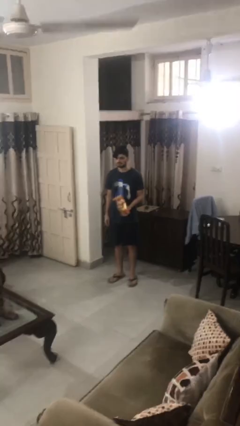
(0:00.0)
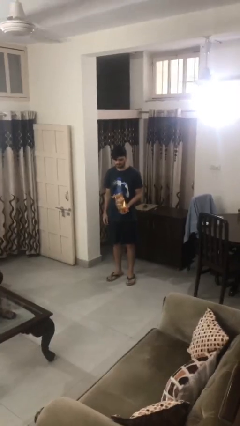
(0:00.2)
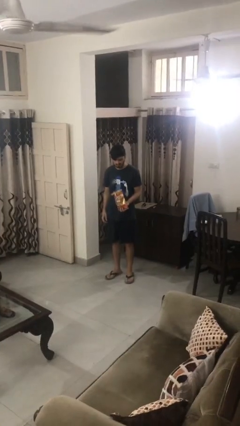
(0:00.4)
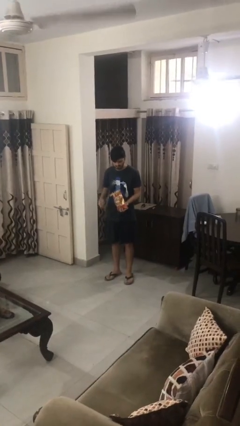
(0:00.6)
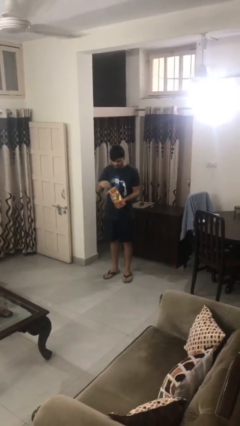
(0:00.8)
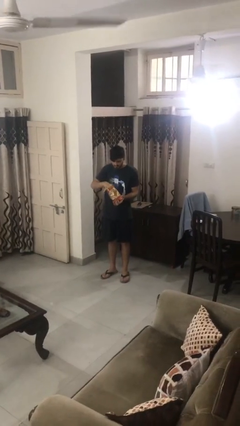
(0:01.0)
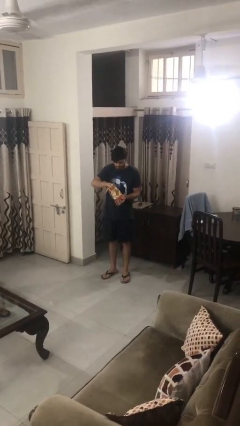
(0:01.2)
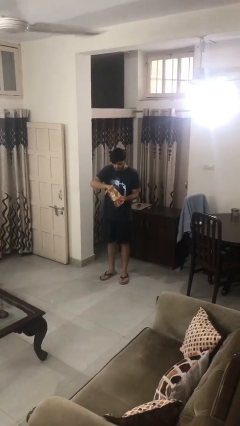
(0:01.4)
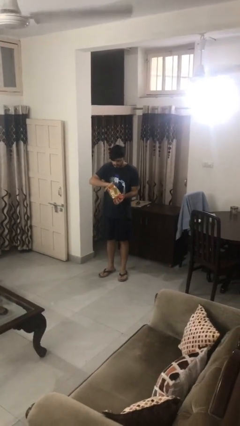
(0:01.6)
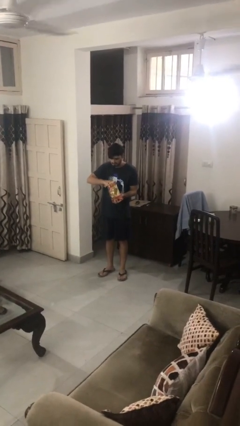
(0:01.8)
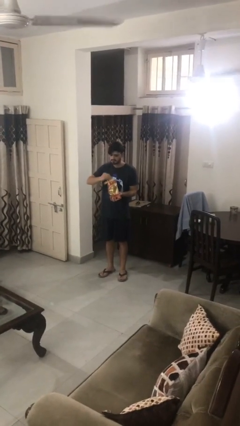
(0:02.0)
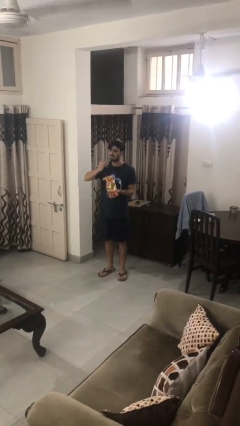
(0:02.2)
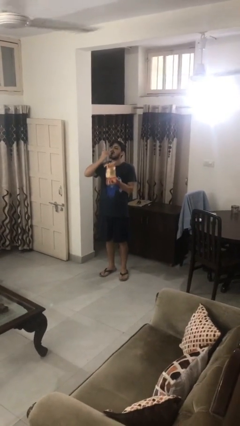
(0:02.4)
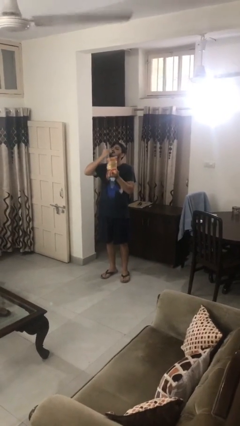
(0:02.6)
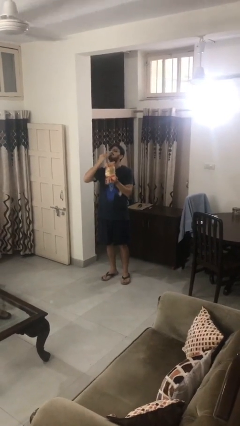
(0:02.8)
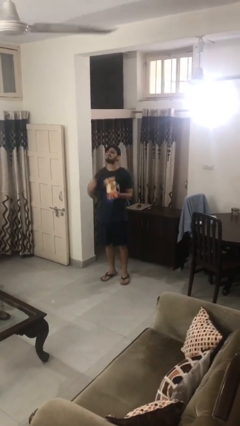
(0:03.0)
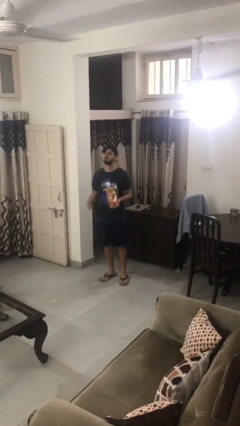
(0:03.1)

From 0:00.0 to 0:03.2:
person eats snack from bag

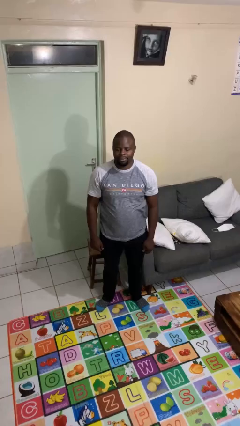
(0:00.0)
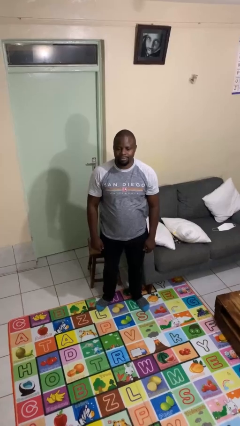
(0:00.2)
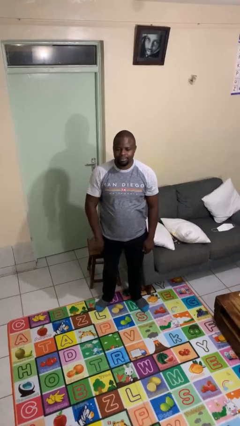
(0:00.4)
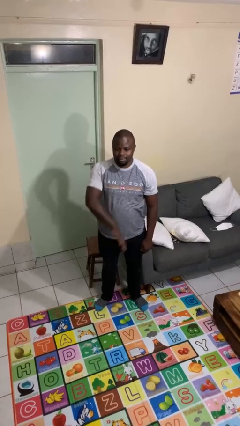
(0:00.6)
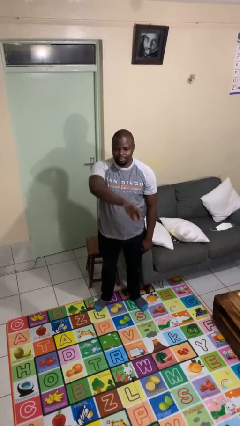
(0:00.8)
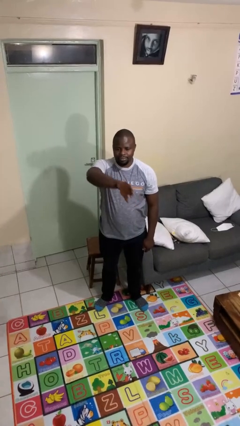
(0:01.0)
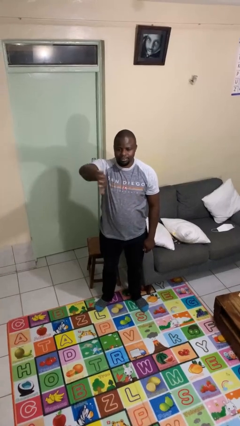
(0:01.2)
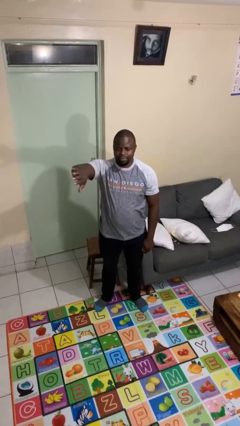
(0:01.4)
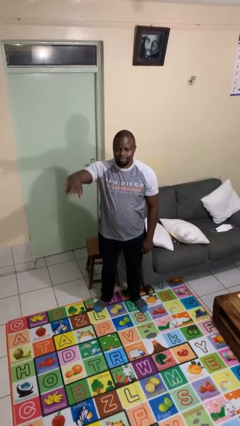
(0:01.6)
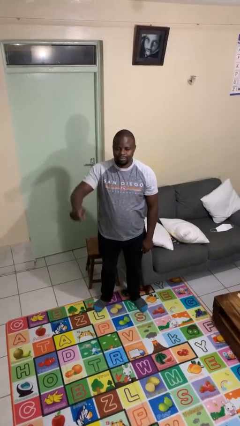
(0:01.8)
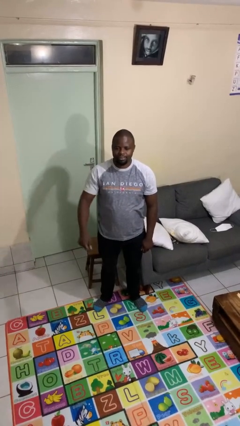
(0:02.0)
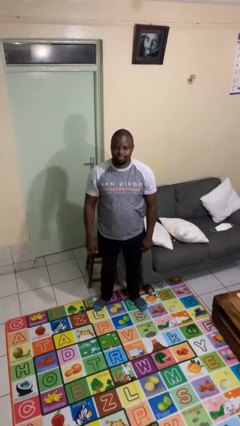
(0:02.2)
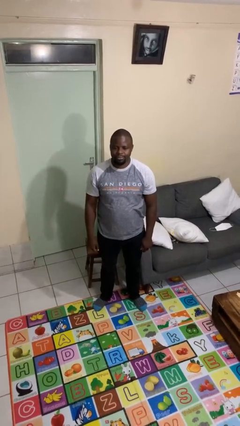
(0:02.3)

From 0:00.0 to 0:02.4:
person gestures swipe right

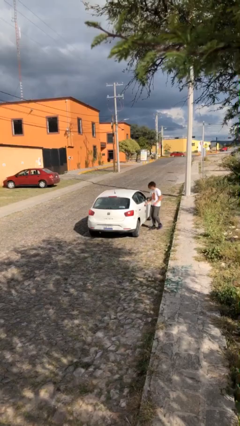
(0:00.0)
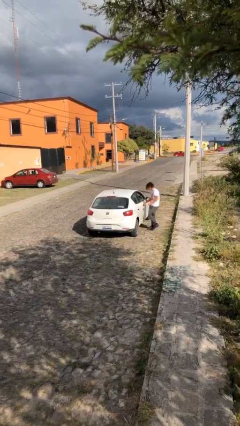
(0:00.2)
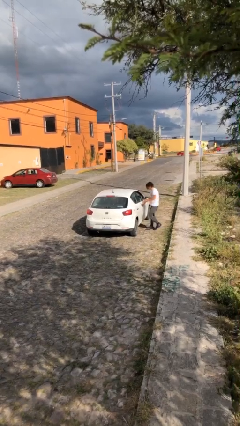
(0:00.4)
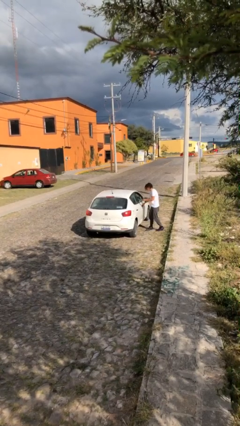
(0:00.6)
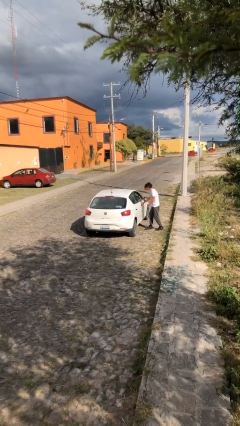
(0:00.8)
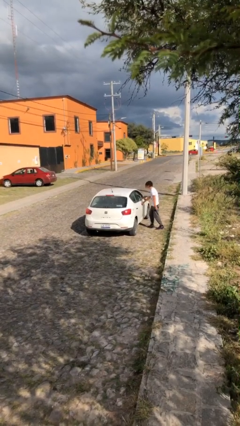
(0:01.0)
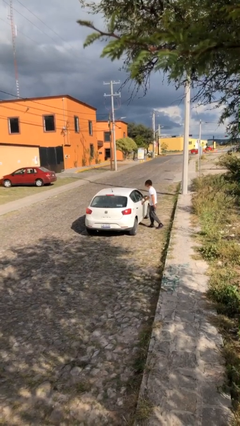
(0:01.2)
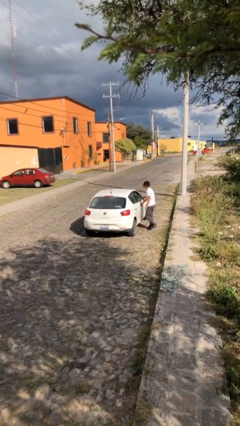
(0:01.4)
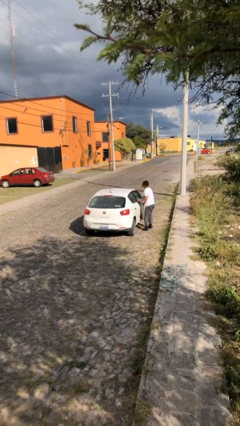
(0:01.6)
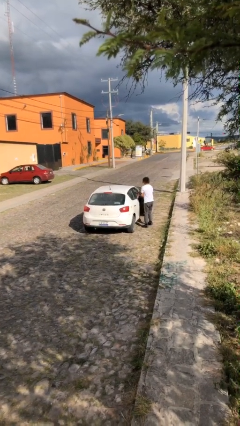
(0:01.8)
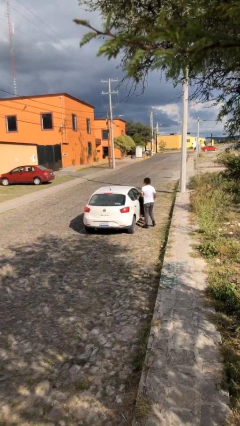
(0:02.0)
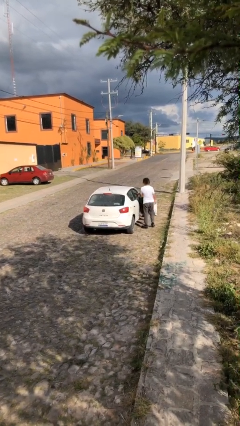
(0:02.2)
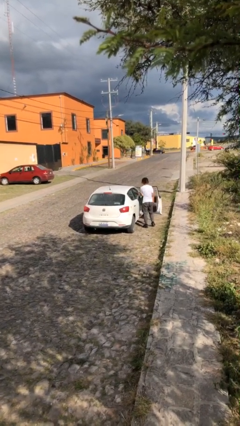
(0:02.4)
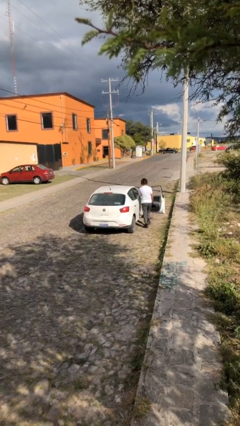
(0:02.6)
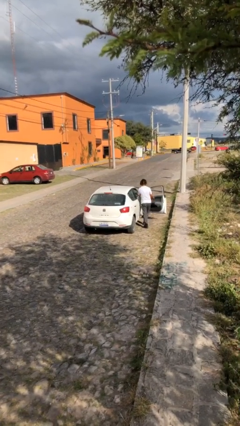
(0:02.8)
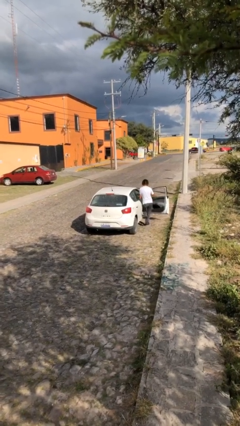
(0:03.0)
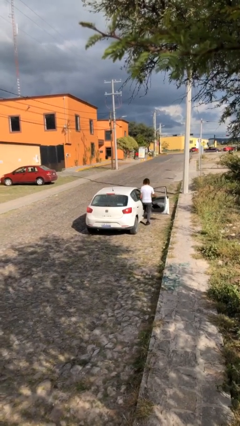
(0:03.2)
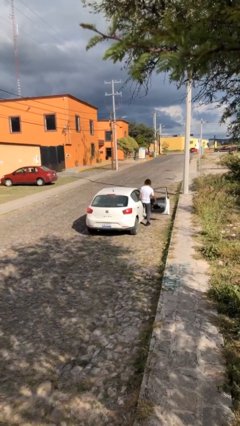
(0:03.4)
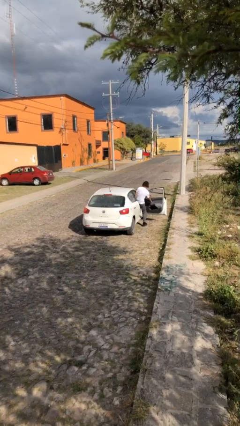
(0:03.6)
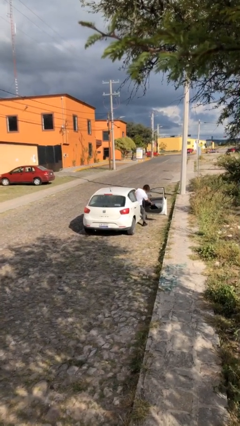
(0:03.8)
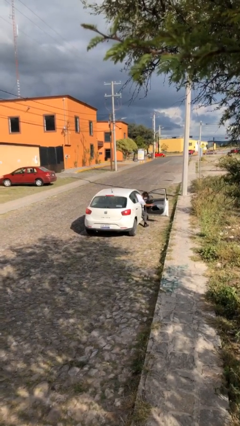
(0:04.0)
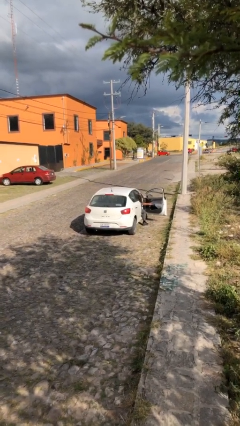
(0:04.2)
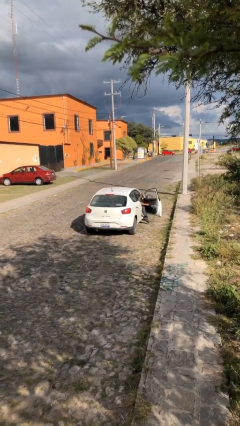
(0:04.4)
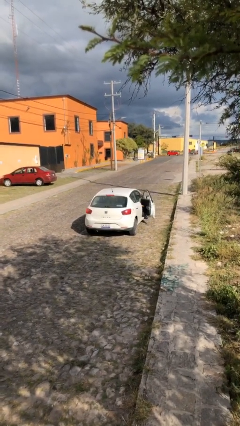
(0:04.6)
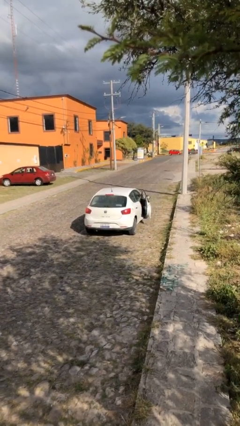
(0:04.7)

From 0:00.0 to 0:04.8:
car picks up person

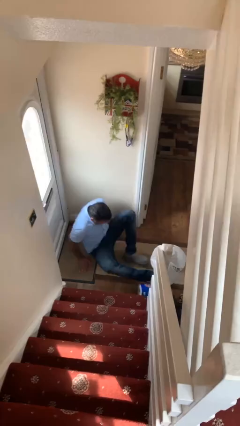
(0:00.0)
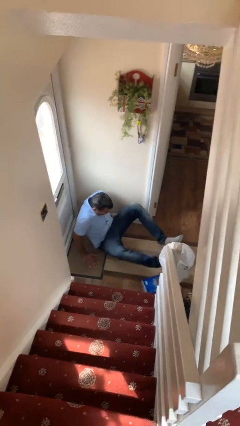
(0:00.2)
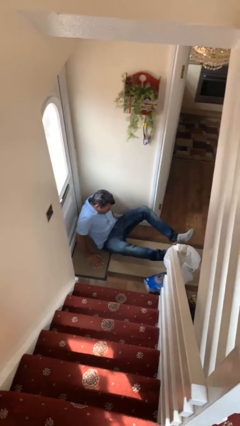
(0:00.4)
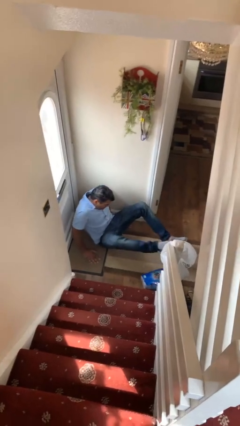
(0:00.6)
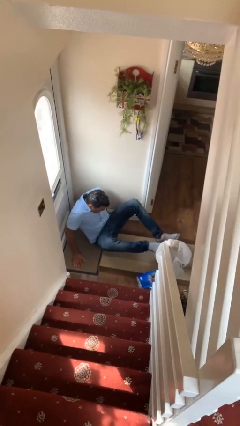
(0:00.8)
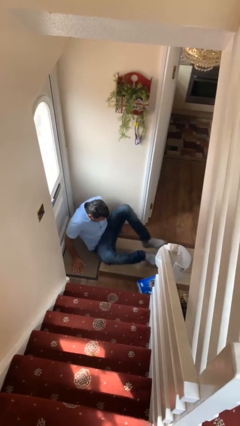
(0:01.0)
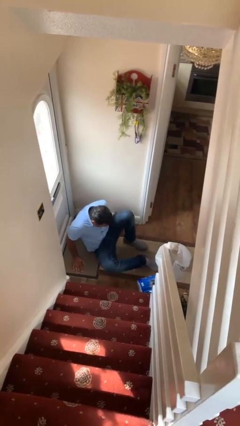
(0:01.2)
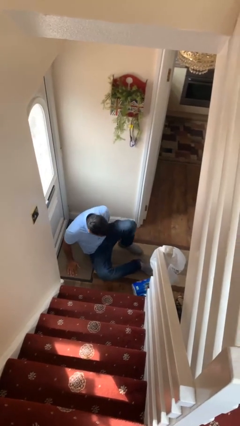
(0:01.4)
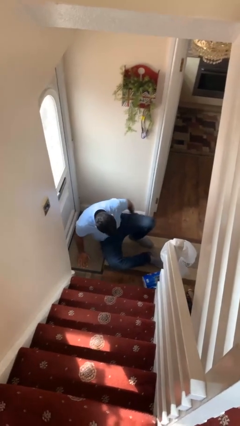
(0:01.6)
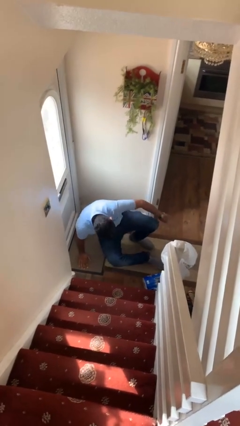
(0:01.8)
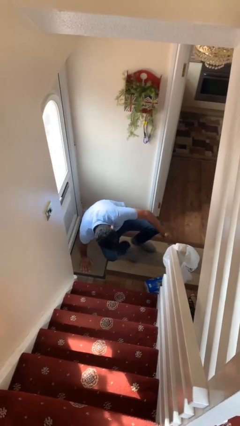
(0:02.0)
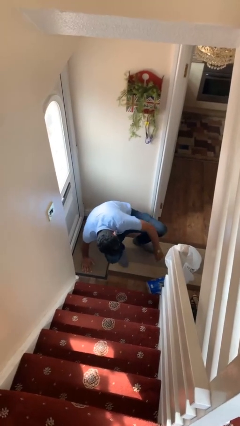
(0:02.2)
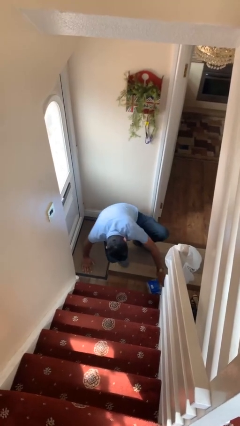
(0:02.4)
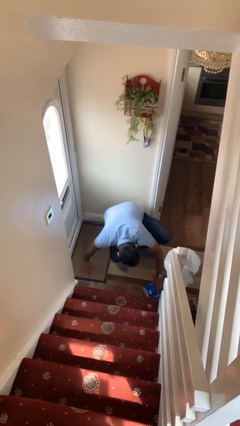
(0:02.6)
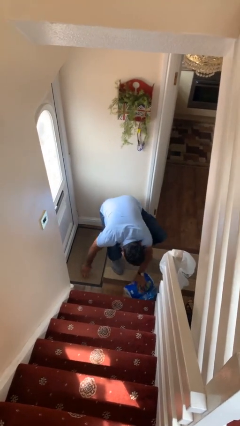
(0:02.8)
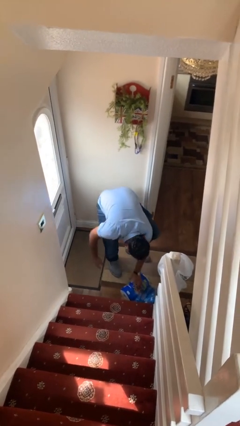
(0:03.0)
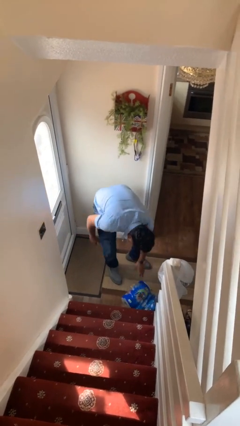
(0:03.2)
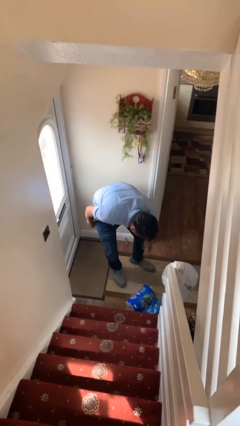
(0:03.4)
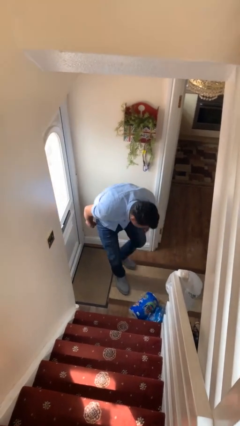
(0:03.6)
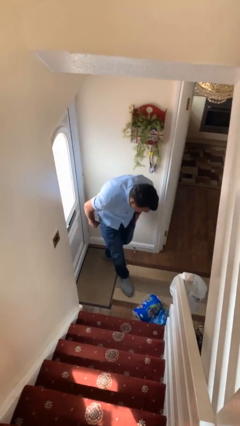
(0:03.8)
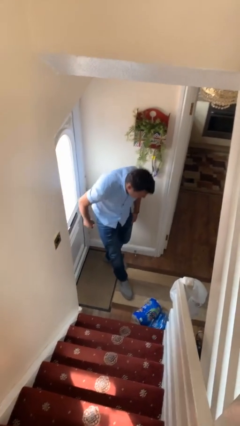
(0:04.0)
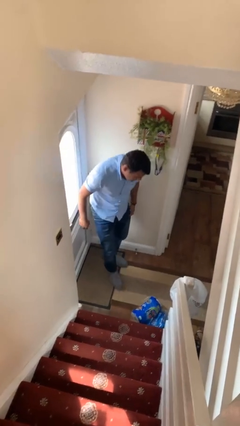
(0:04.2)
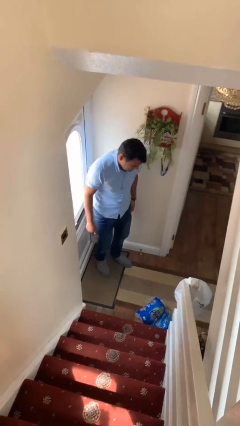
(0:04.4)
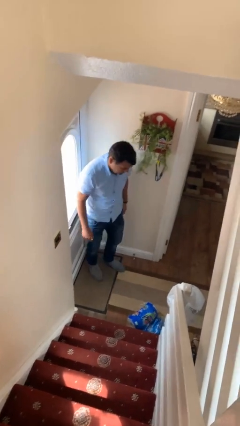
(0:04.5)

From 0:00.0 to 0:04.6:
person stands up from floor

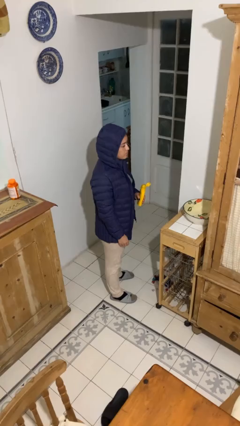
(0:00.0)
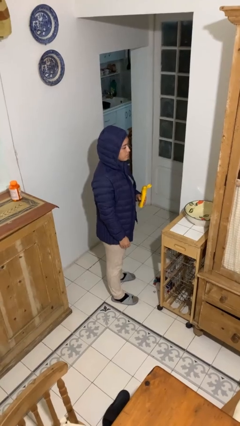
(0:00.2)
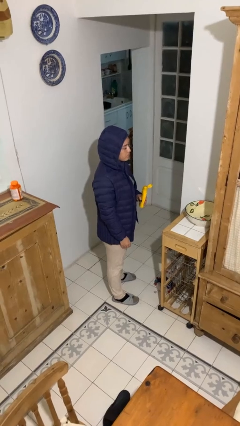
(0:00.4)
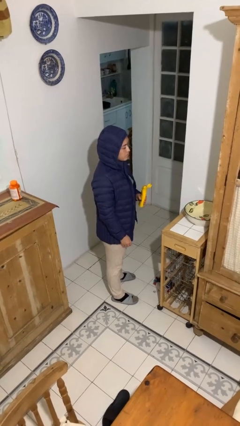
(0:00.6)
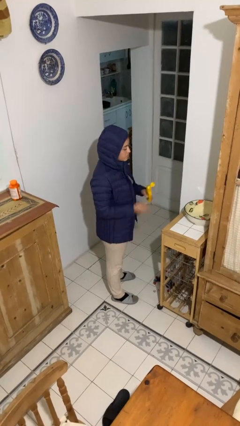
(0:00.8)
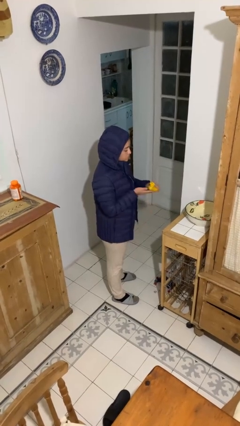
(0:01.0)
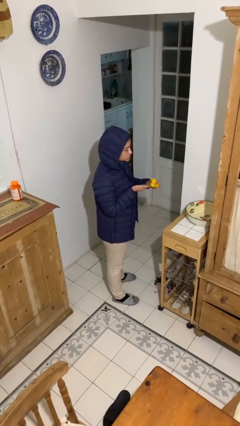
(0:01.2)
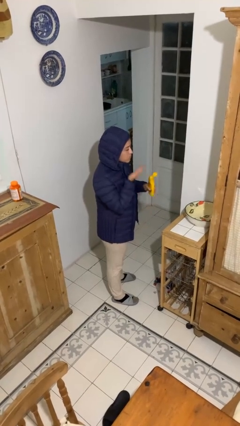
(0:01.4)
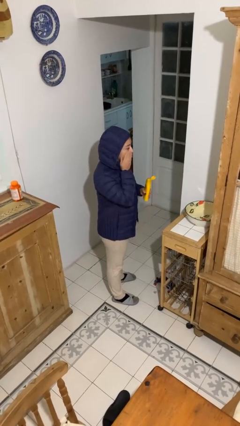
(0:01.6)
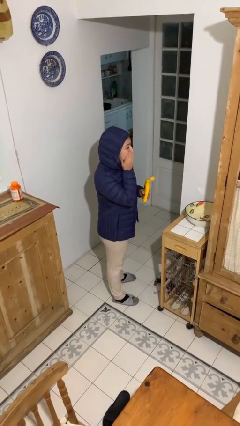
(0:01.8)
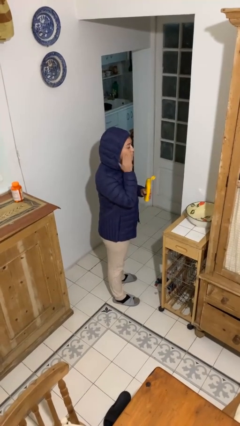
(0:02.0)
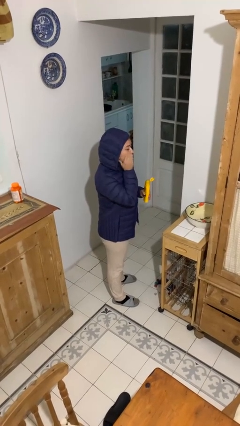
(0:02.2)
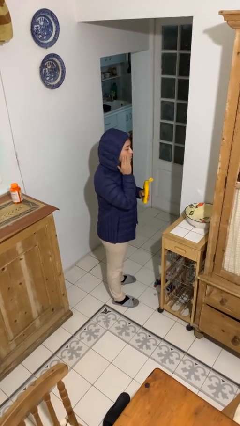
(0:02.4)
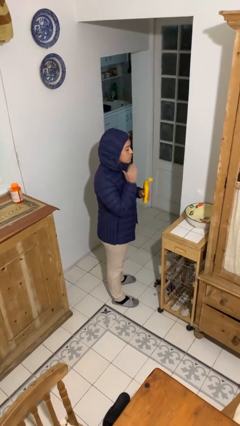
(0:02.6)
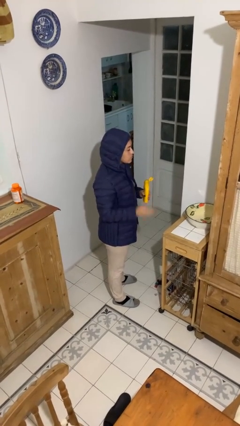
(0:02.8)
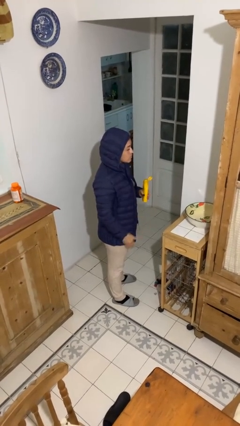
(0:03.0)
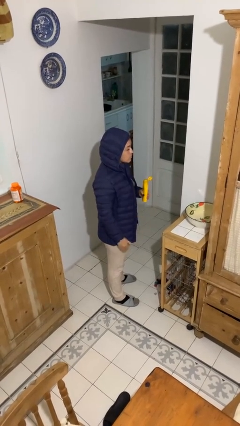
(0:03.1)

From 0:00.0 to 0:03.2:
person applies sunscreen
